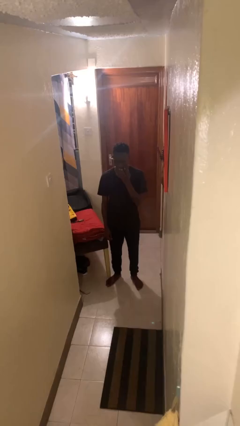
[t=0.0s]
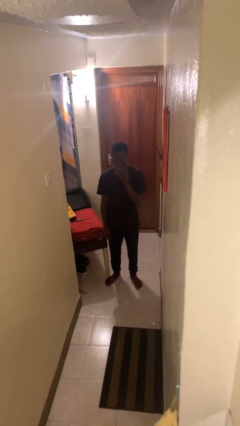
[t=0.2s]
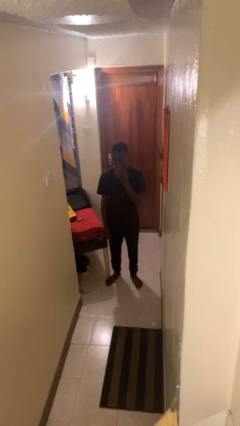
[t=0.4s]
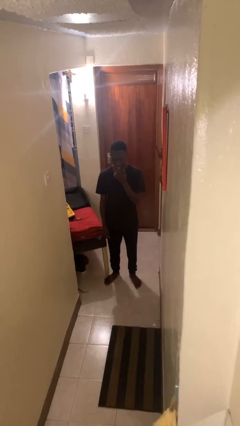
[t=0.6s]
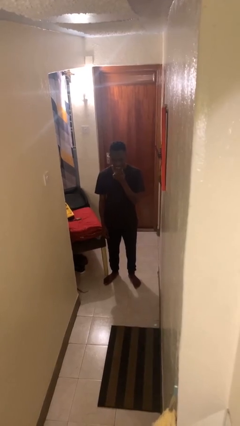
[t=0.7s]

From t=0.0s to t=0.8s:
person licks fingers

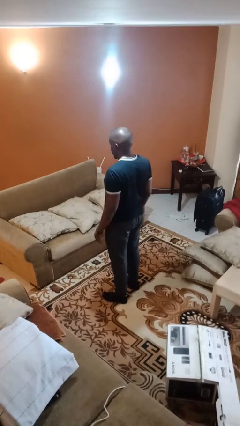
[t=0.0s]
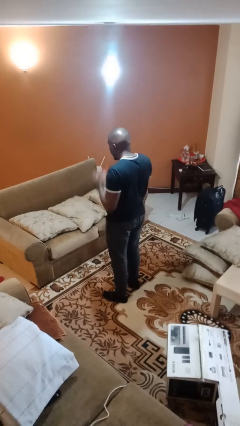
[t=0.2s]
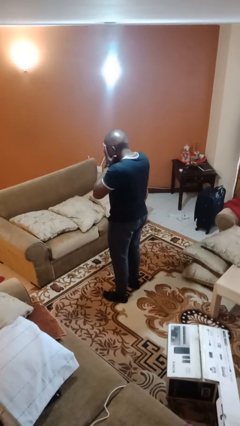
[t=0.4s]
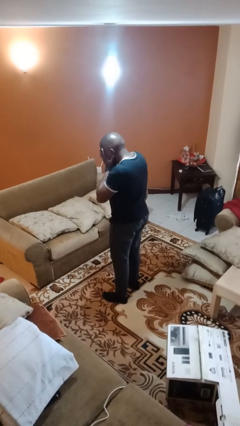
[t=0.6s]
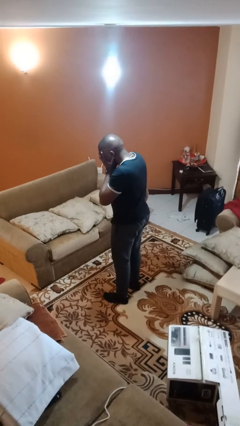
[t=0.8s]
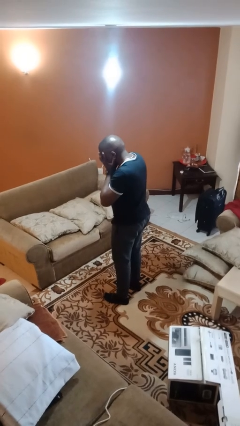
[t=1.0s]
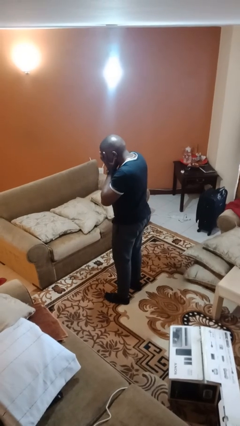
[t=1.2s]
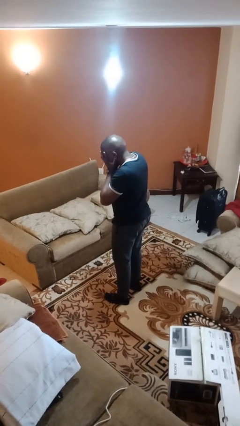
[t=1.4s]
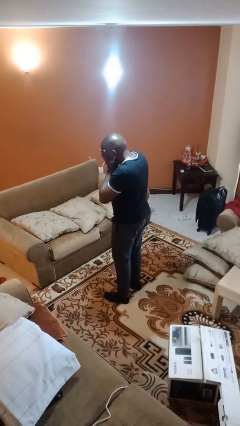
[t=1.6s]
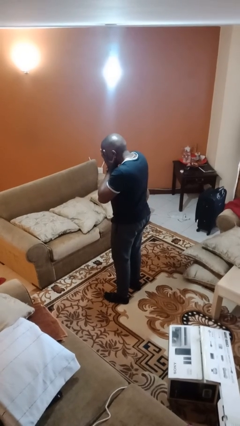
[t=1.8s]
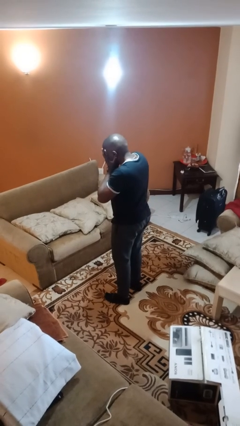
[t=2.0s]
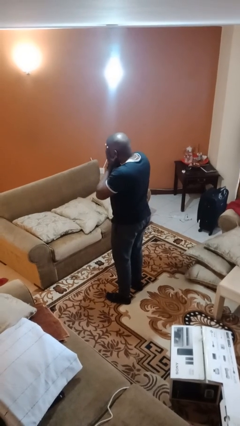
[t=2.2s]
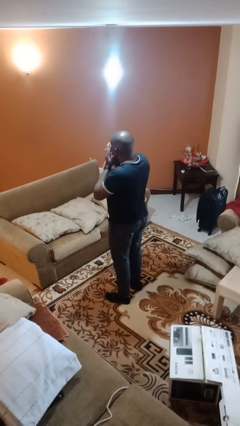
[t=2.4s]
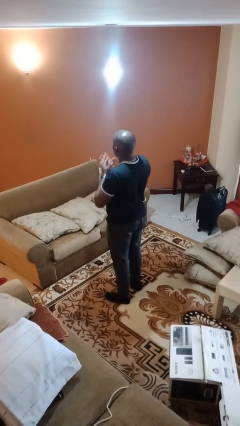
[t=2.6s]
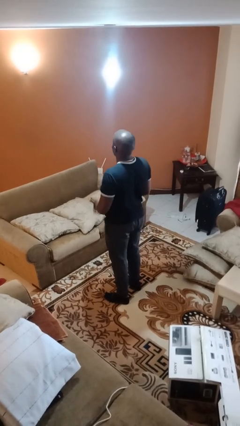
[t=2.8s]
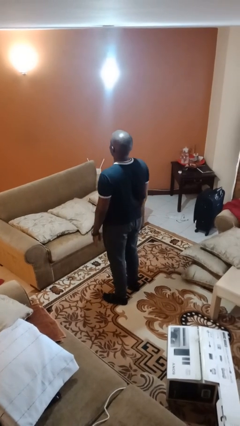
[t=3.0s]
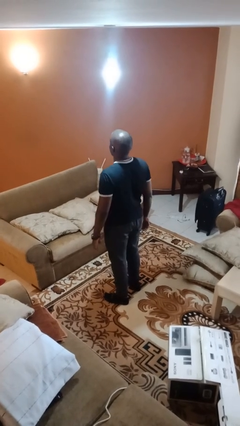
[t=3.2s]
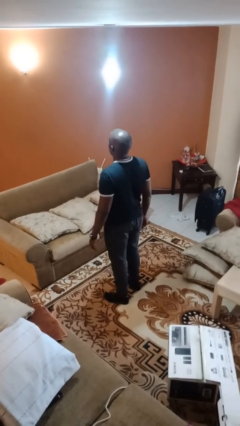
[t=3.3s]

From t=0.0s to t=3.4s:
person covers face with hands

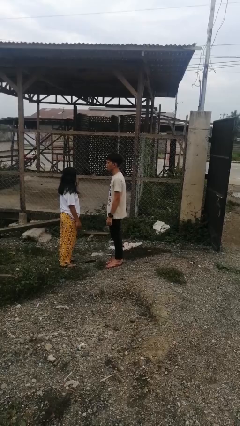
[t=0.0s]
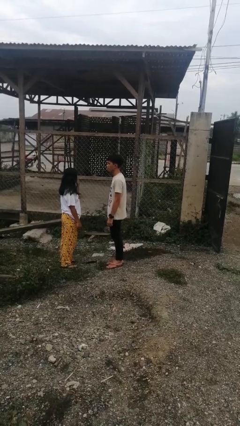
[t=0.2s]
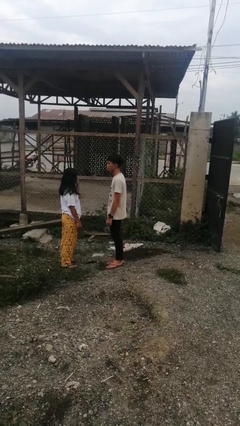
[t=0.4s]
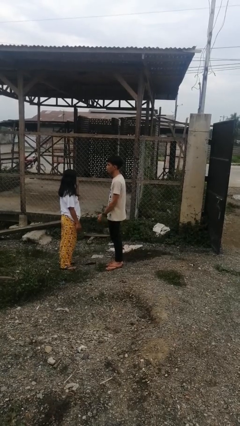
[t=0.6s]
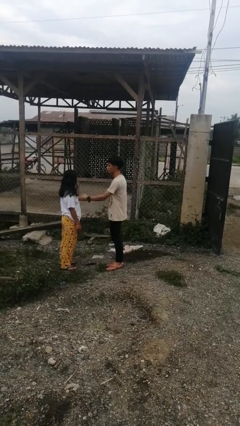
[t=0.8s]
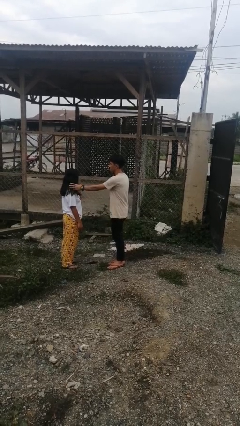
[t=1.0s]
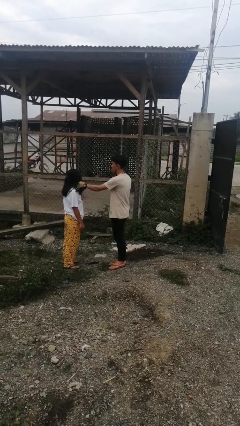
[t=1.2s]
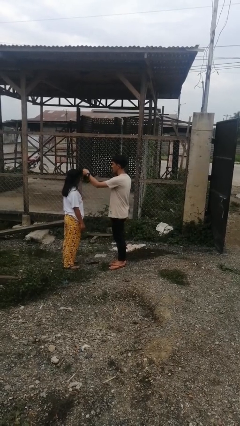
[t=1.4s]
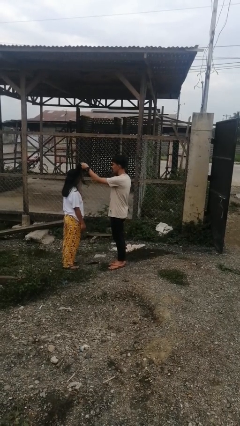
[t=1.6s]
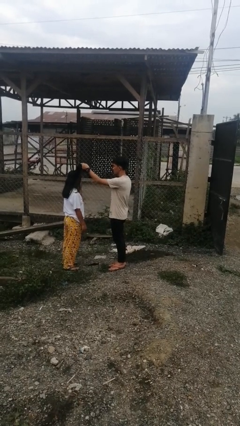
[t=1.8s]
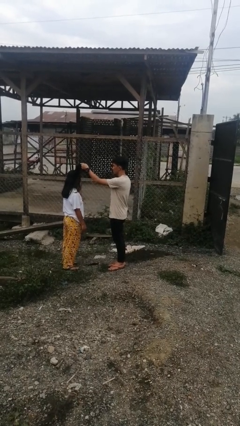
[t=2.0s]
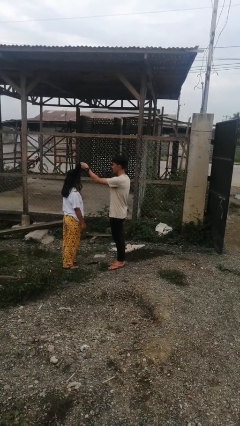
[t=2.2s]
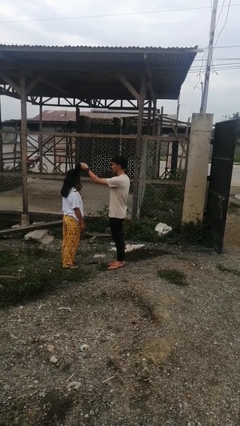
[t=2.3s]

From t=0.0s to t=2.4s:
person grabs person by hair

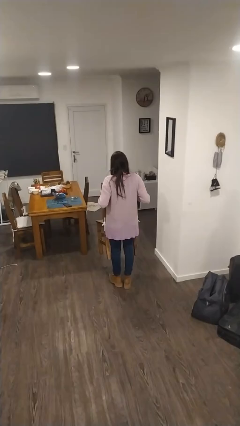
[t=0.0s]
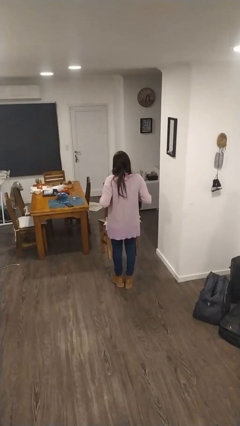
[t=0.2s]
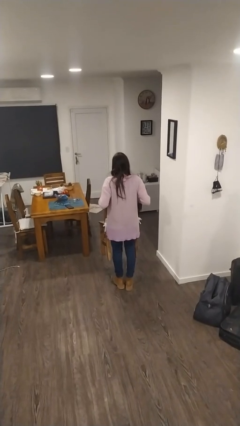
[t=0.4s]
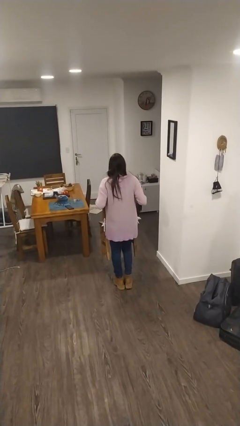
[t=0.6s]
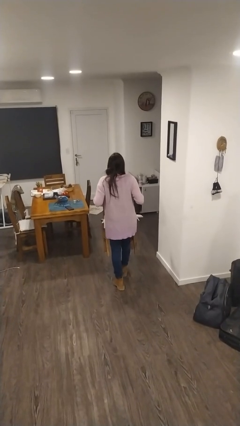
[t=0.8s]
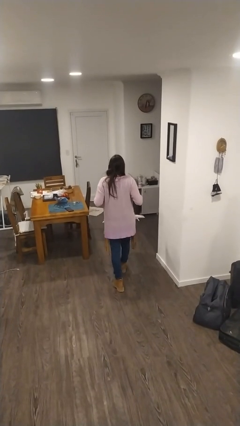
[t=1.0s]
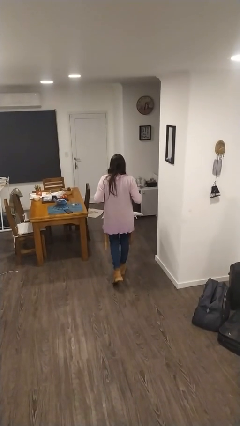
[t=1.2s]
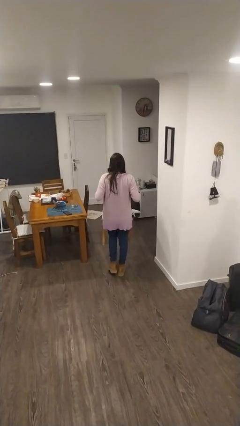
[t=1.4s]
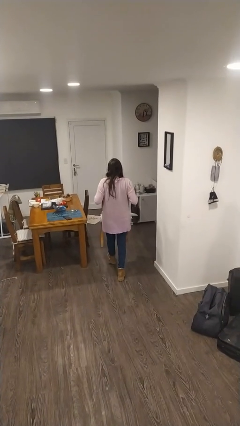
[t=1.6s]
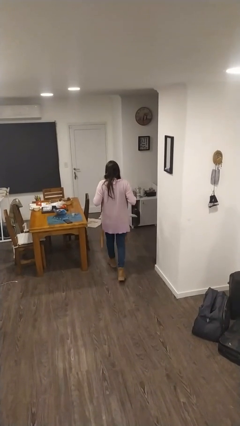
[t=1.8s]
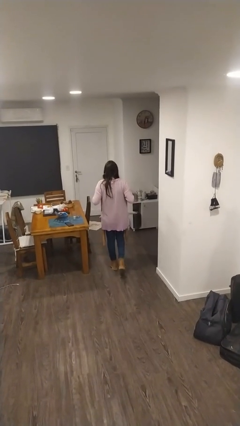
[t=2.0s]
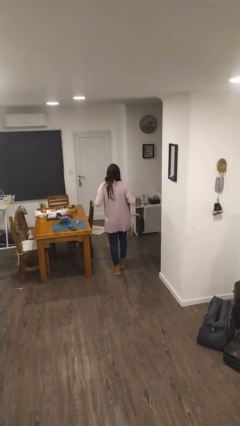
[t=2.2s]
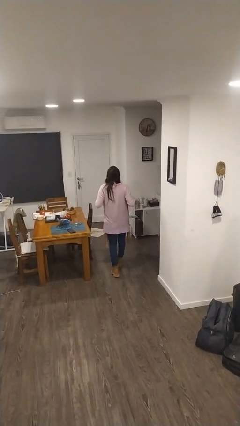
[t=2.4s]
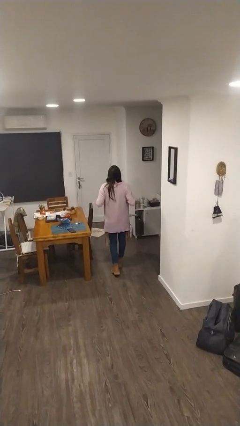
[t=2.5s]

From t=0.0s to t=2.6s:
person carries furniture

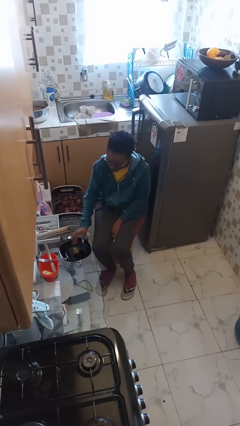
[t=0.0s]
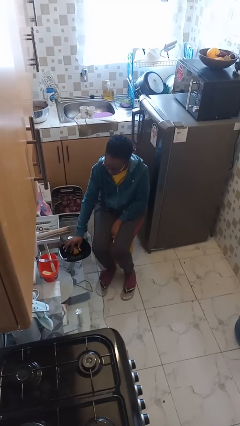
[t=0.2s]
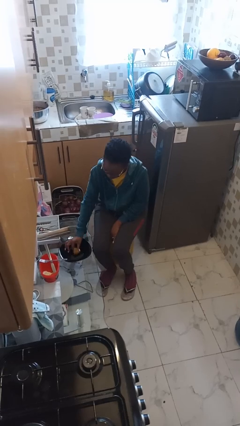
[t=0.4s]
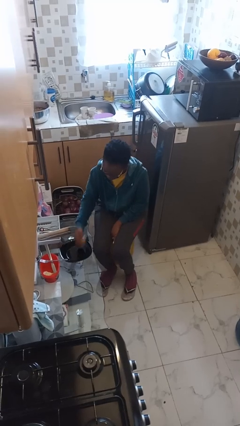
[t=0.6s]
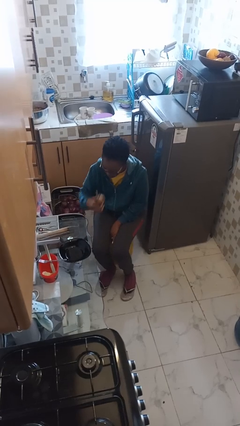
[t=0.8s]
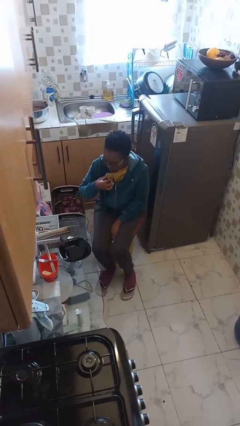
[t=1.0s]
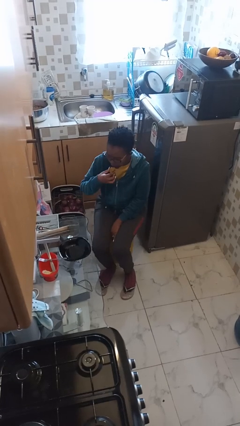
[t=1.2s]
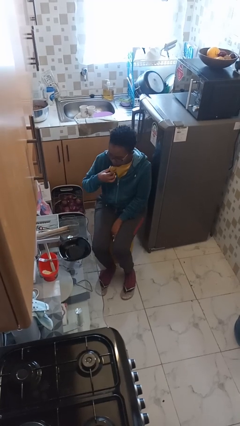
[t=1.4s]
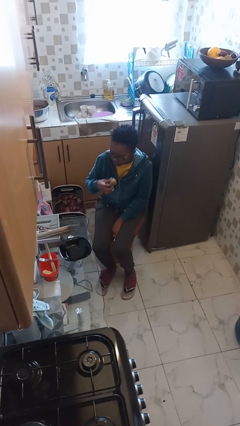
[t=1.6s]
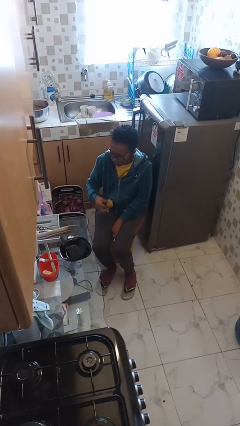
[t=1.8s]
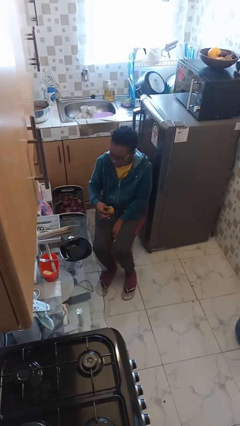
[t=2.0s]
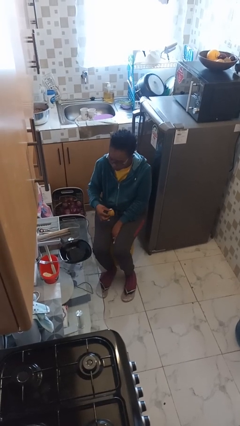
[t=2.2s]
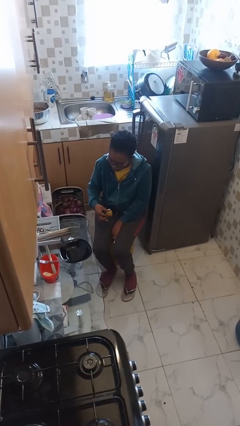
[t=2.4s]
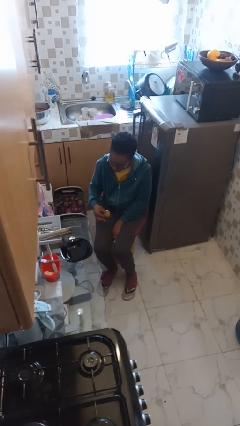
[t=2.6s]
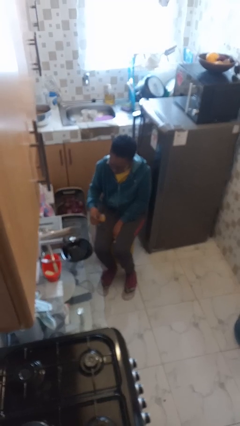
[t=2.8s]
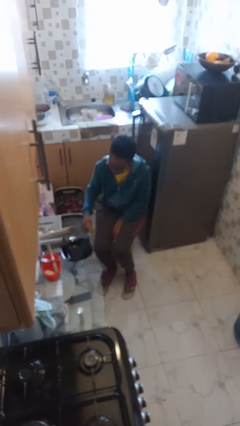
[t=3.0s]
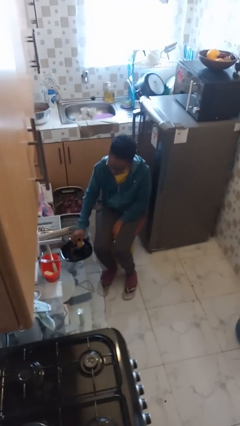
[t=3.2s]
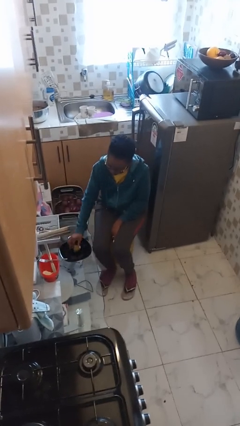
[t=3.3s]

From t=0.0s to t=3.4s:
person eats with hands

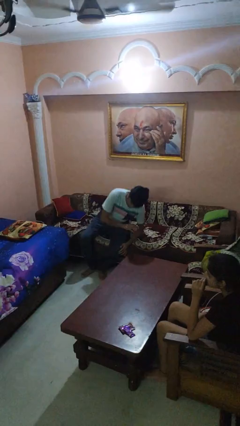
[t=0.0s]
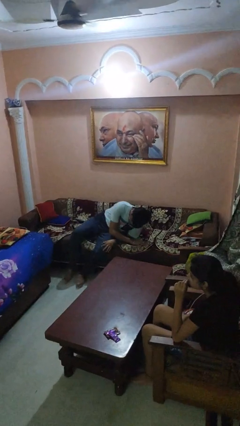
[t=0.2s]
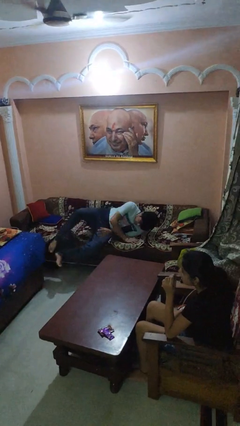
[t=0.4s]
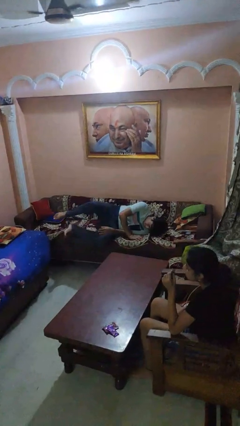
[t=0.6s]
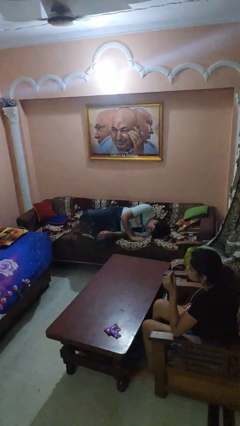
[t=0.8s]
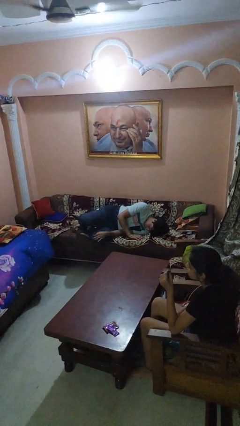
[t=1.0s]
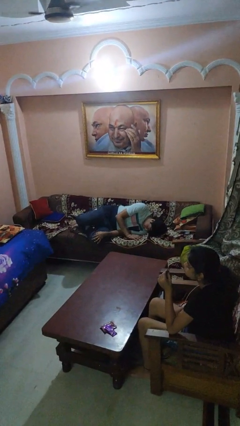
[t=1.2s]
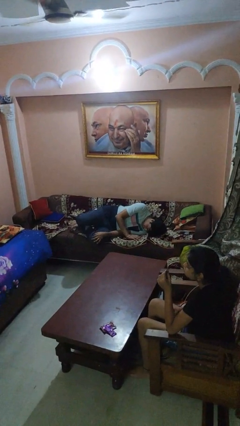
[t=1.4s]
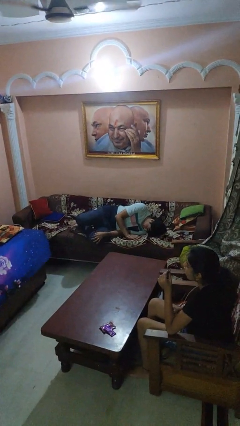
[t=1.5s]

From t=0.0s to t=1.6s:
person lies down on couch

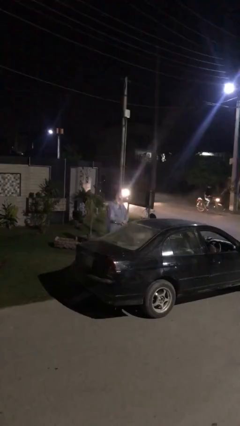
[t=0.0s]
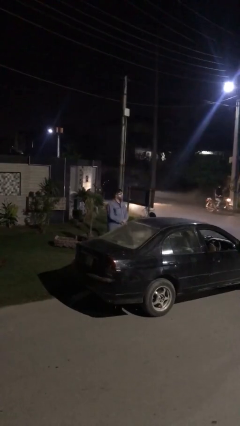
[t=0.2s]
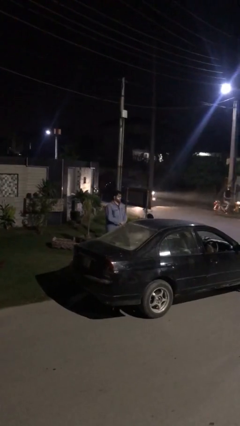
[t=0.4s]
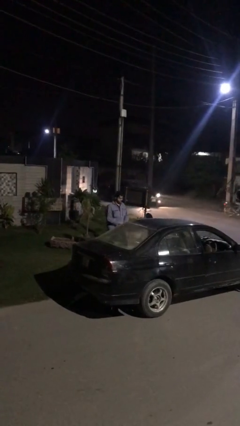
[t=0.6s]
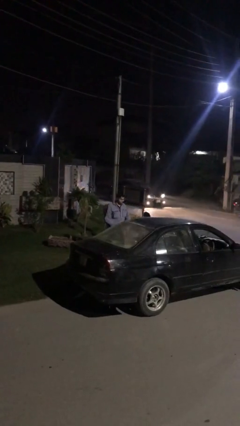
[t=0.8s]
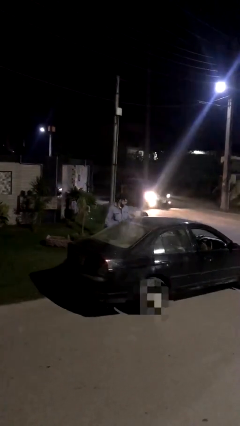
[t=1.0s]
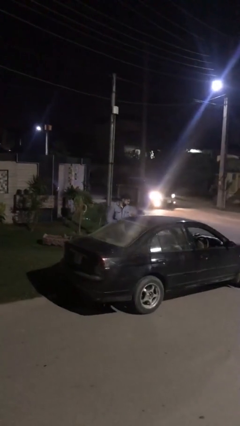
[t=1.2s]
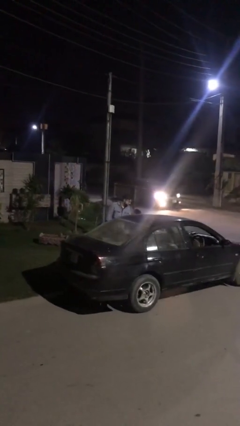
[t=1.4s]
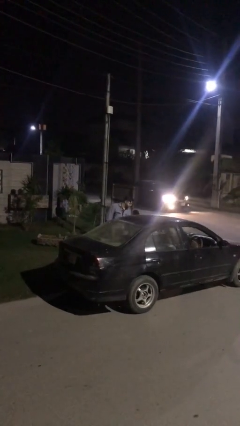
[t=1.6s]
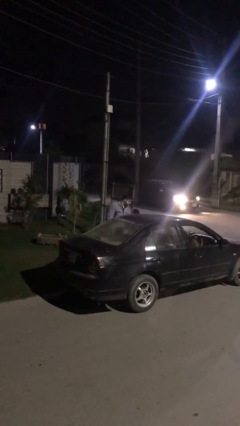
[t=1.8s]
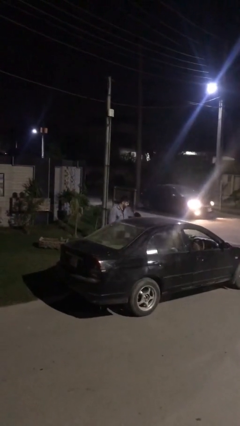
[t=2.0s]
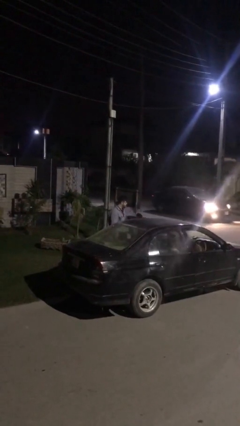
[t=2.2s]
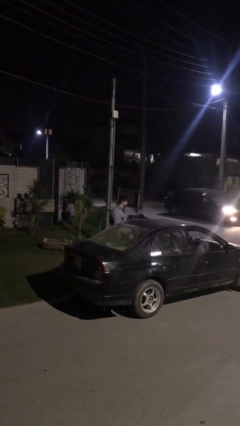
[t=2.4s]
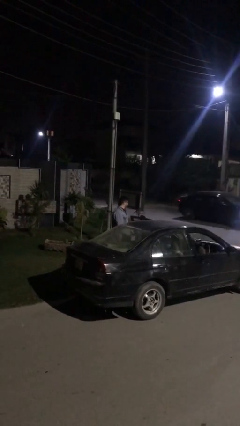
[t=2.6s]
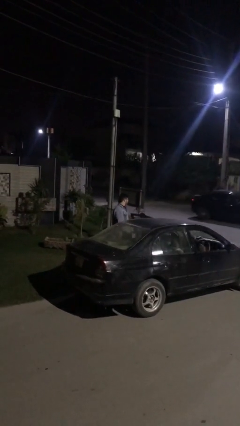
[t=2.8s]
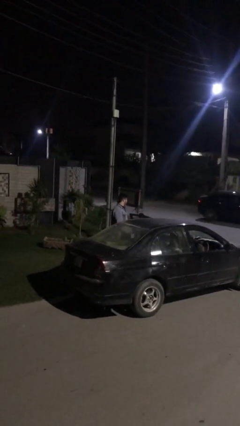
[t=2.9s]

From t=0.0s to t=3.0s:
person opens car door
